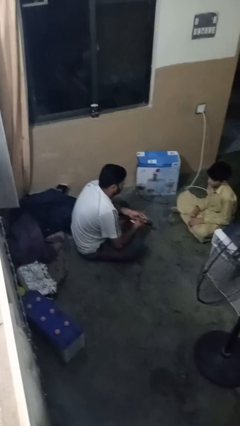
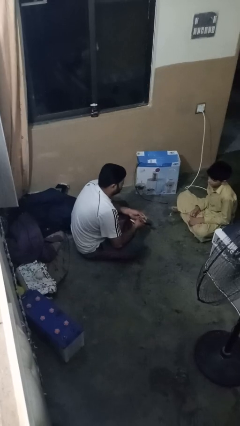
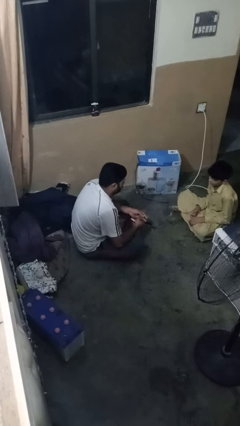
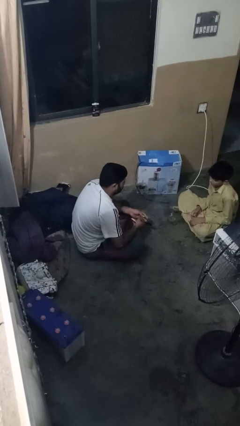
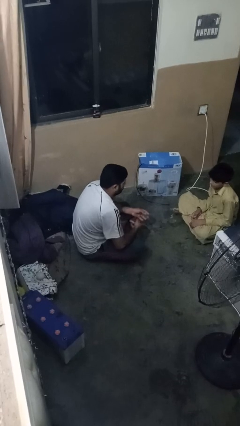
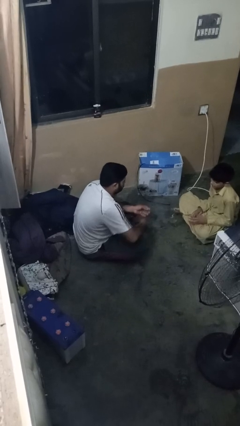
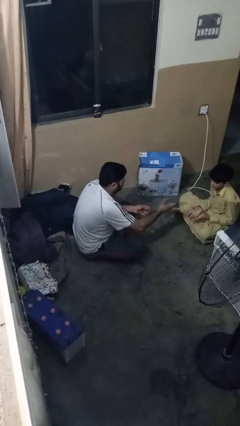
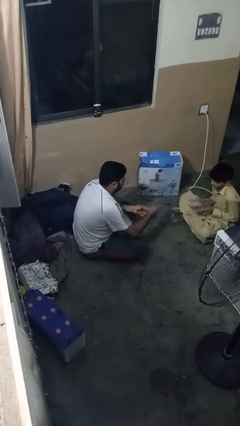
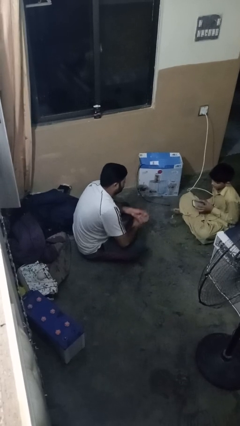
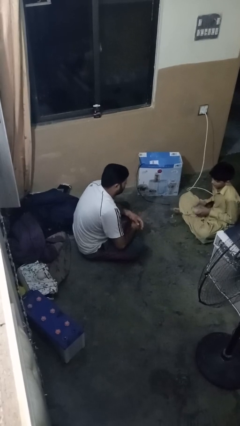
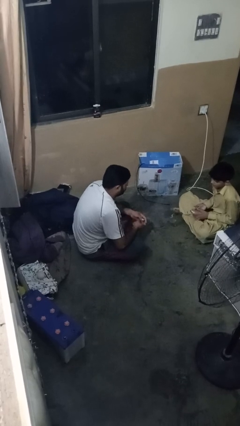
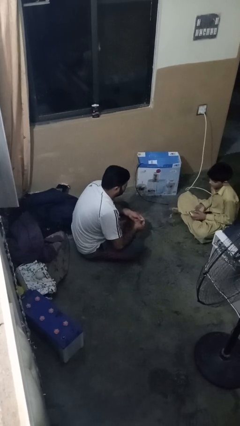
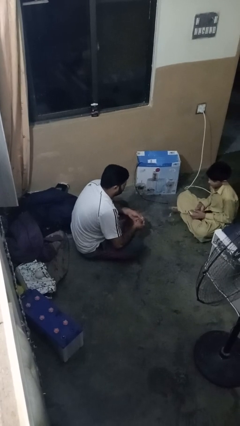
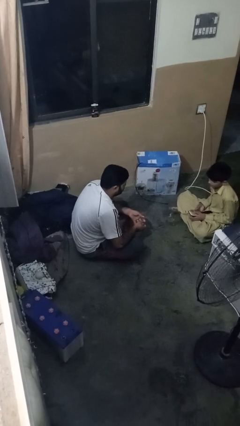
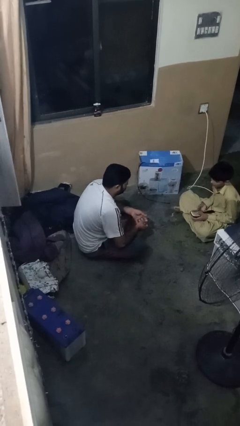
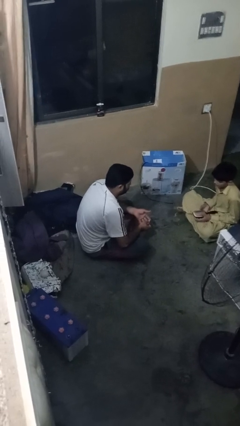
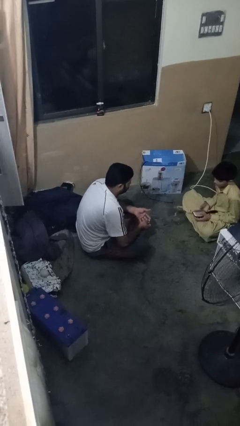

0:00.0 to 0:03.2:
person throws object to person

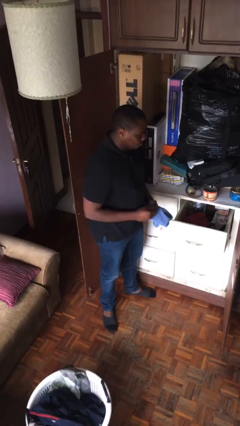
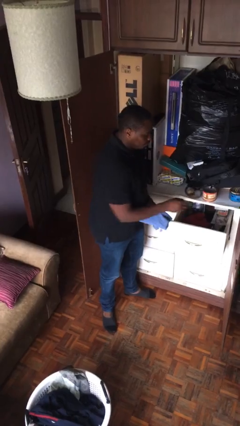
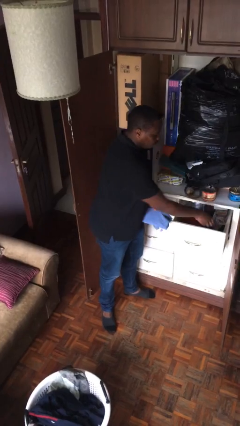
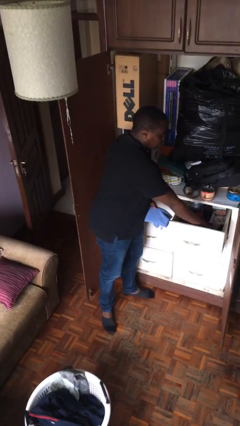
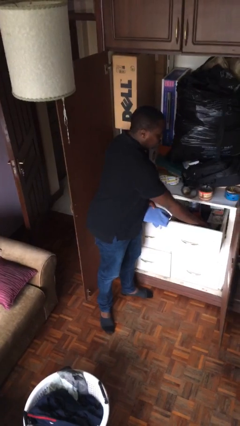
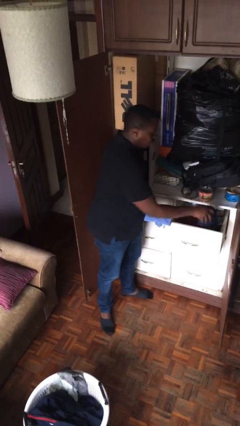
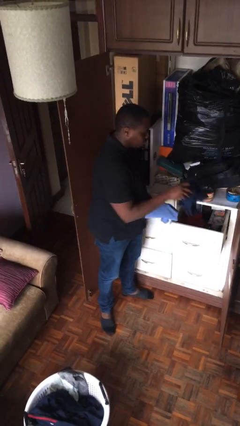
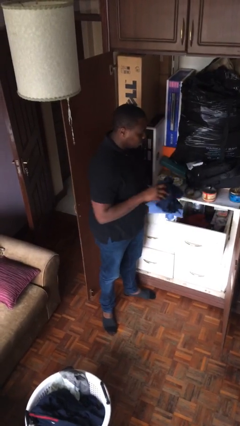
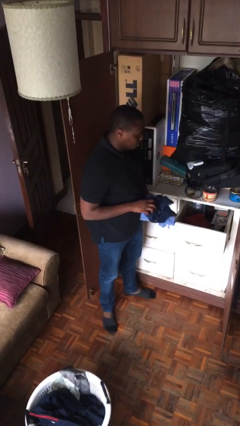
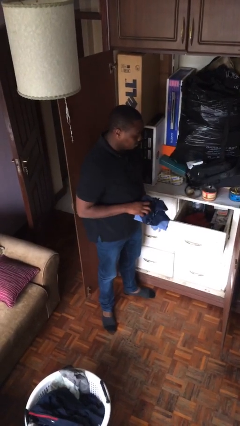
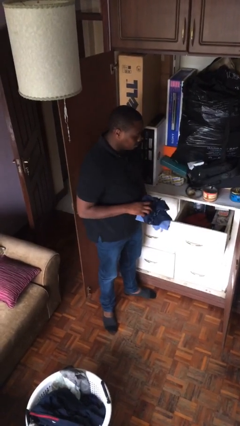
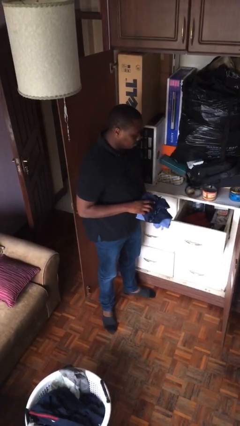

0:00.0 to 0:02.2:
person takes clothes from dresser

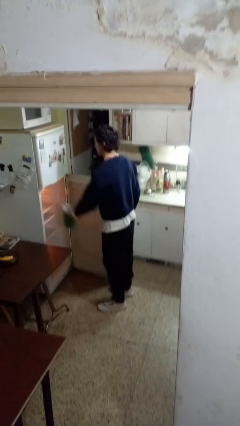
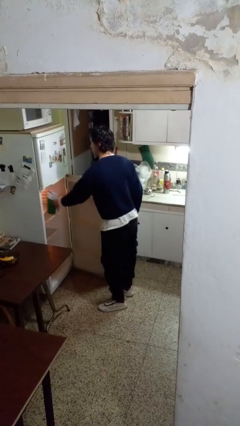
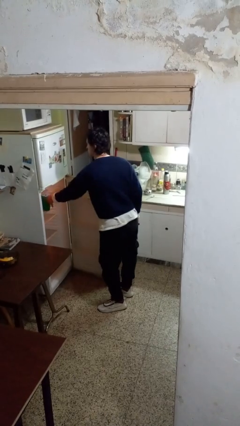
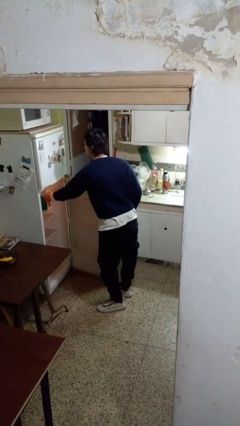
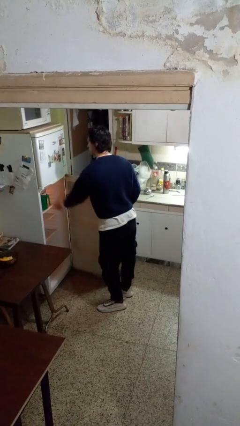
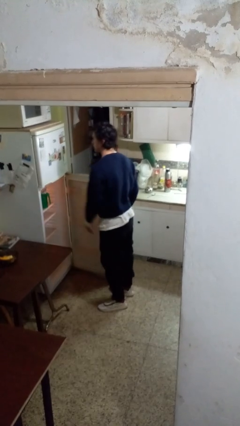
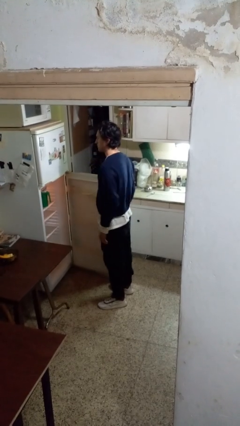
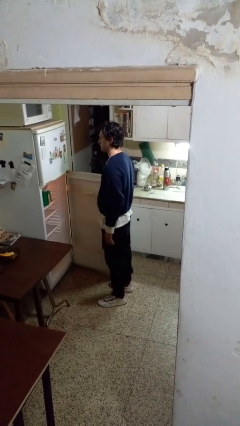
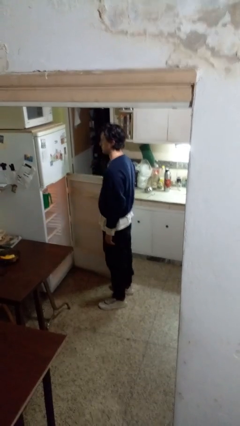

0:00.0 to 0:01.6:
person puts object into refrigerator

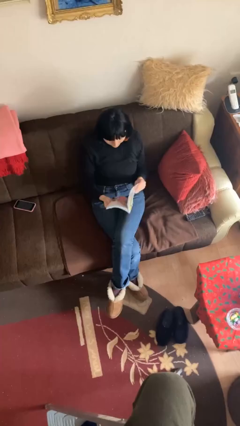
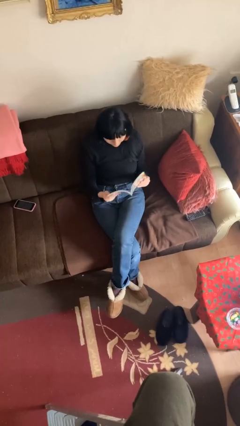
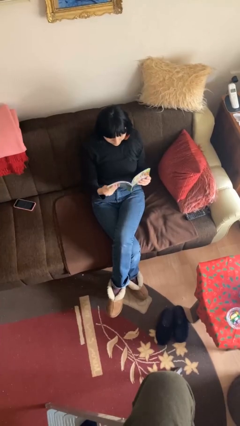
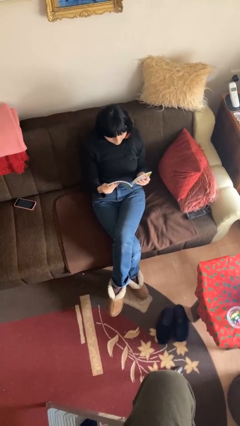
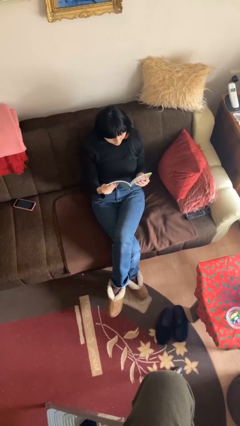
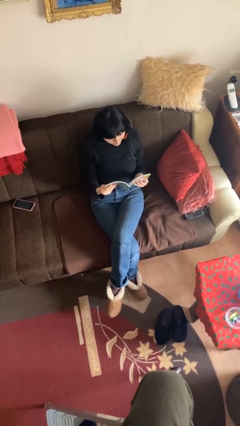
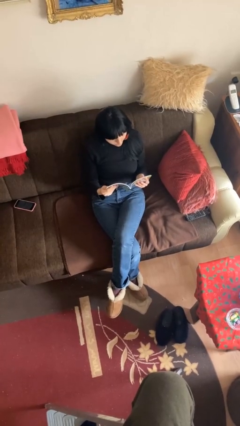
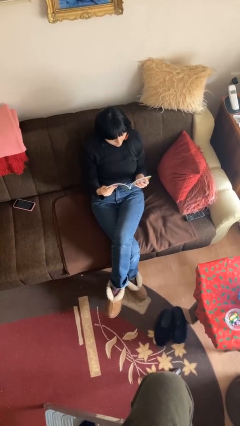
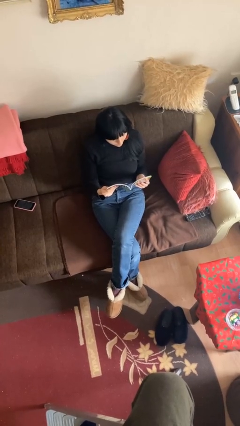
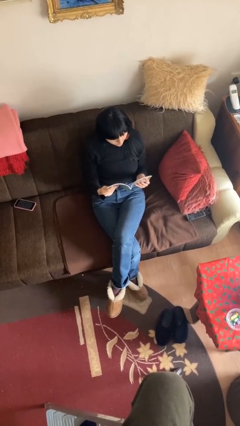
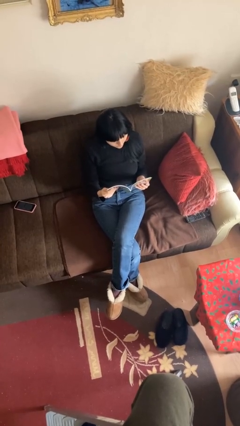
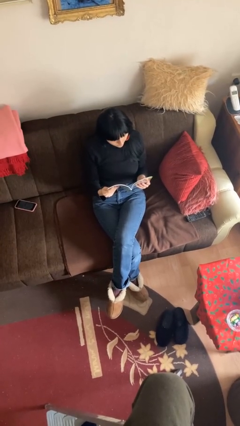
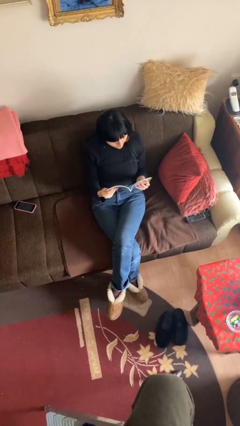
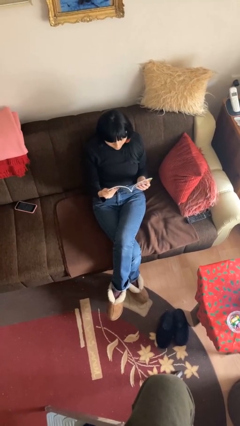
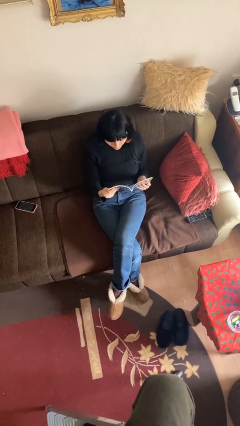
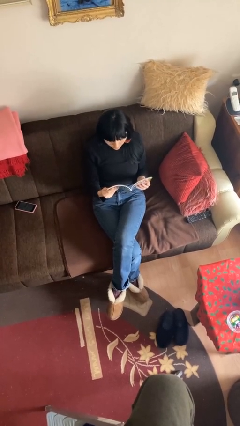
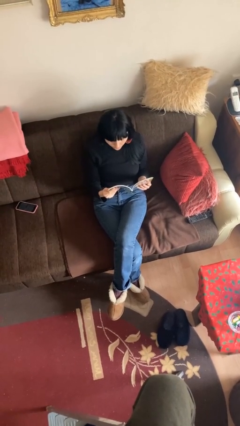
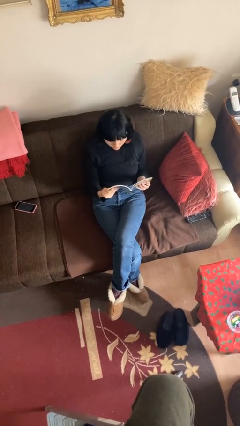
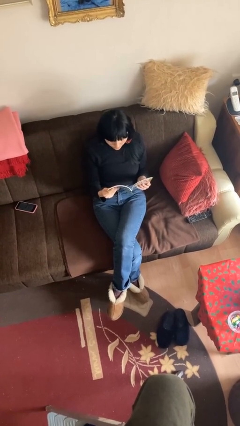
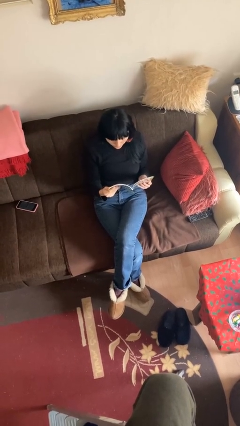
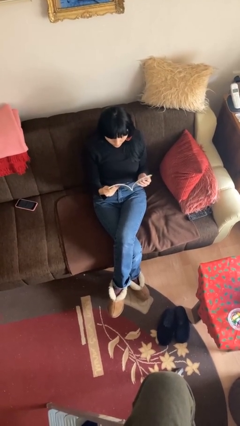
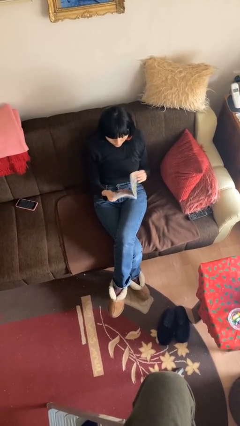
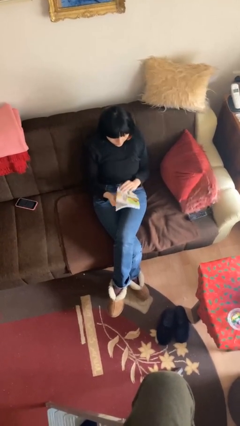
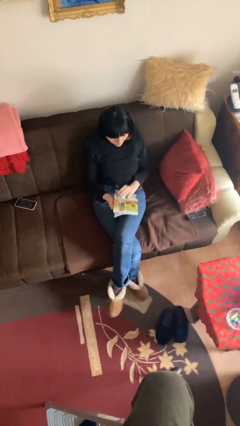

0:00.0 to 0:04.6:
person reads document

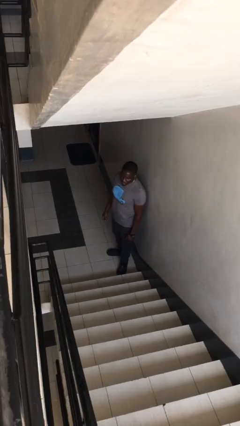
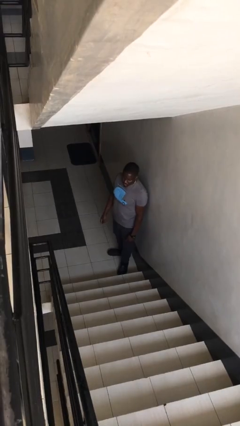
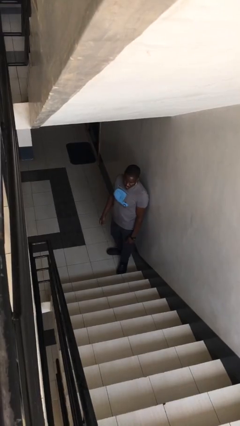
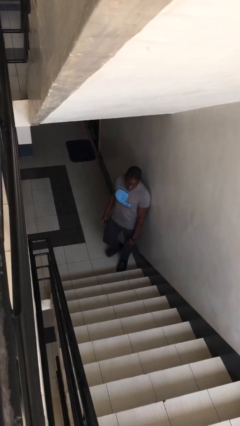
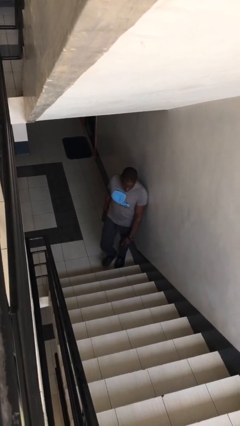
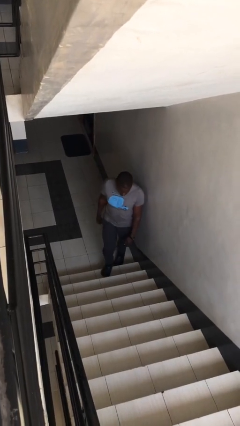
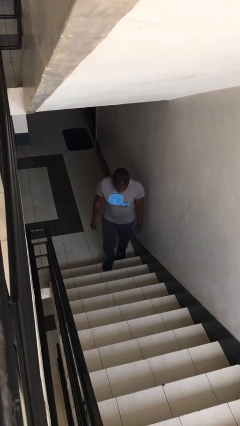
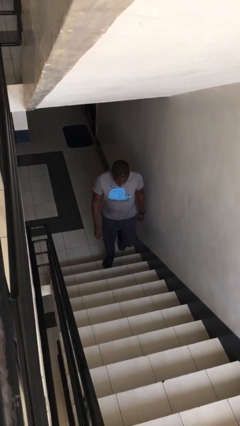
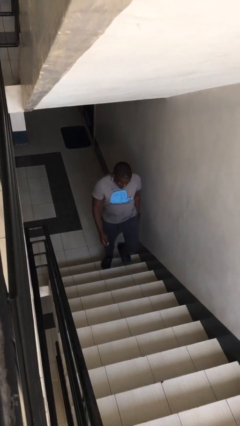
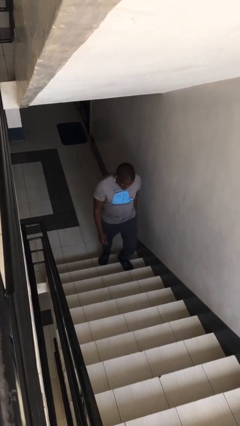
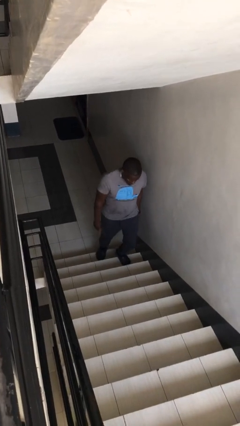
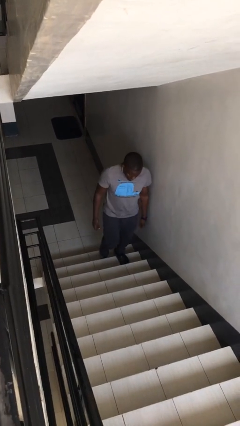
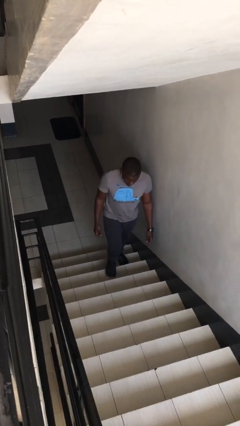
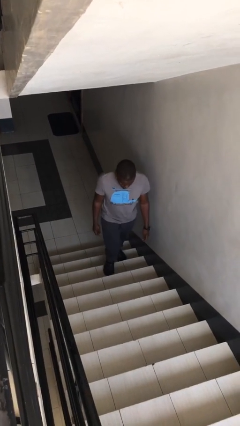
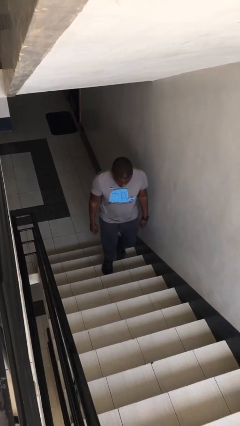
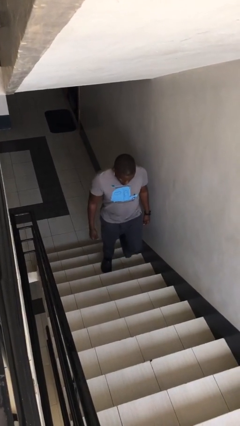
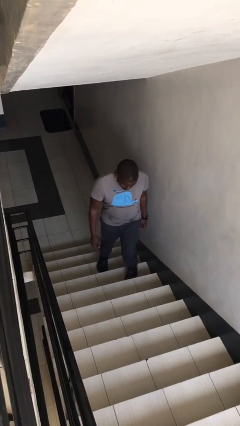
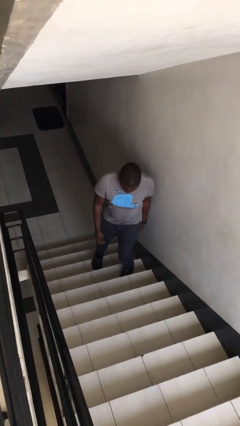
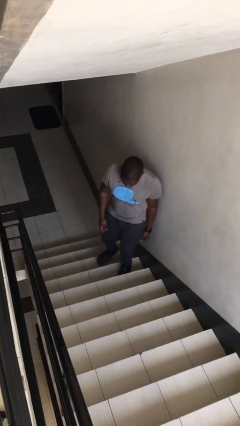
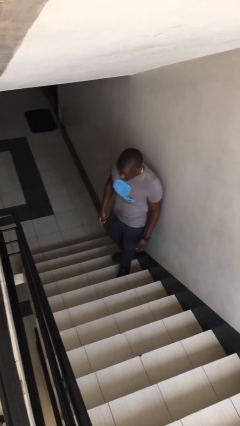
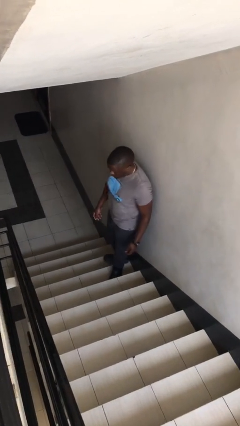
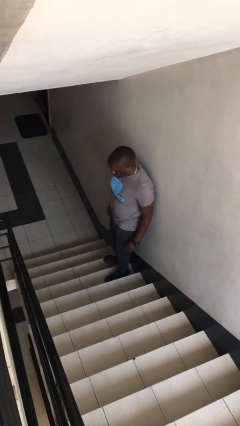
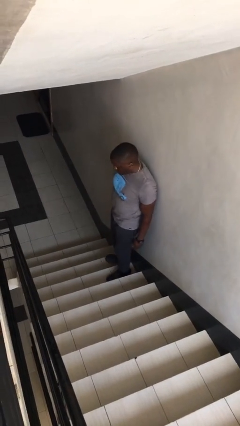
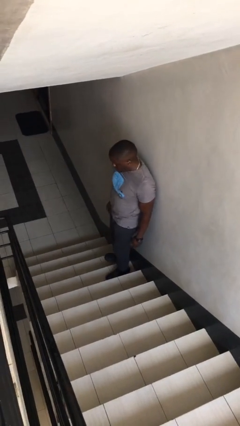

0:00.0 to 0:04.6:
person climbs up stairs

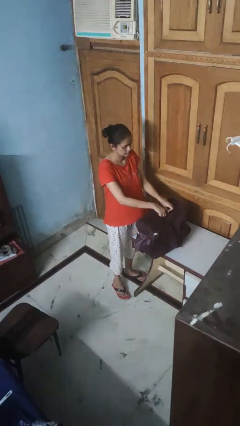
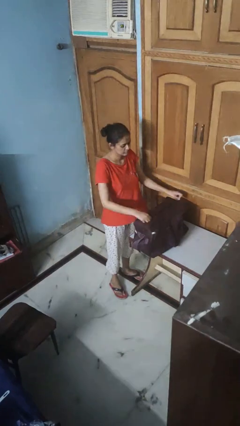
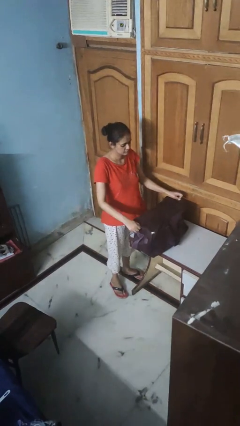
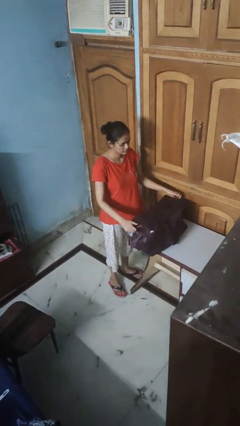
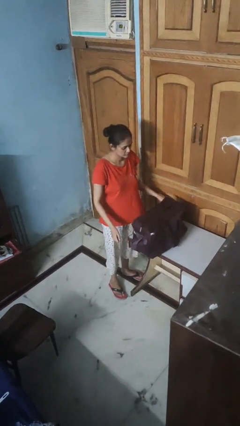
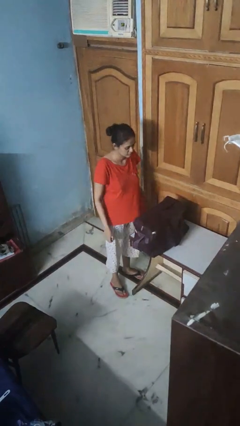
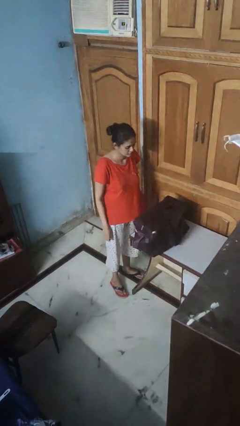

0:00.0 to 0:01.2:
person opens suitcase
